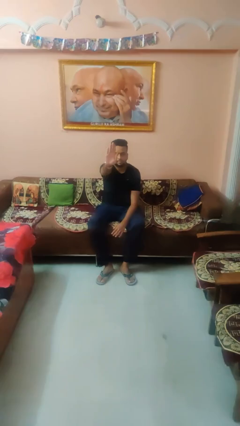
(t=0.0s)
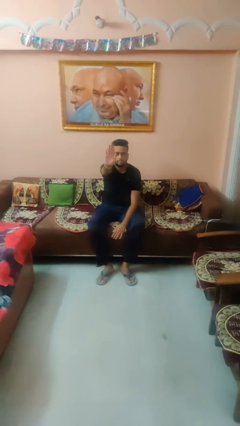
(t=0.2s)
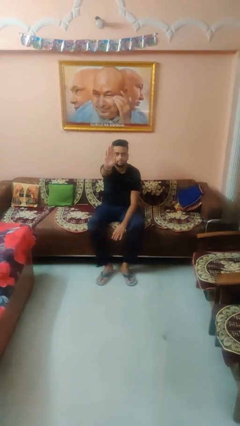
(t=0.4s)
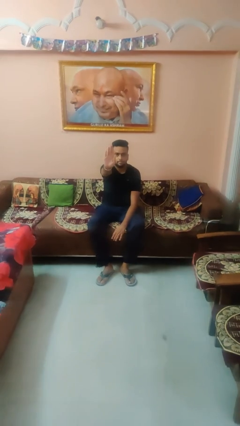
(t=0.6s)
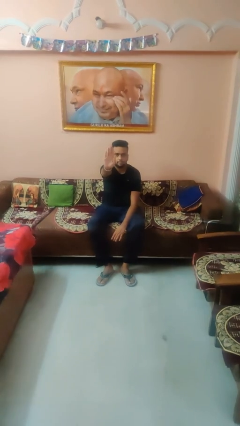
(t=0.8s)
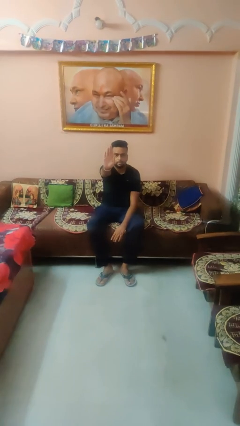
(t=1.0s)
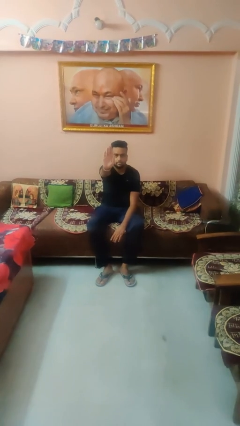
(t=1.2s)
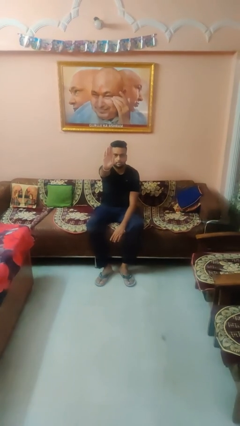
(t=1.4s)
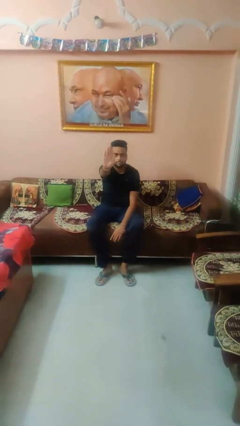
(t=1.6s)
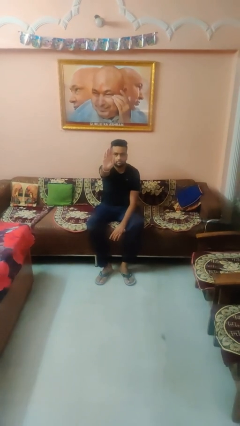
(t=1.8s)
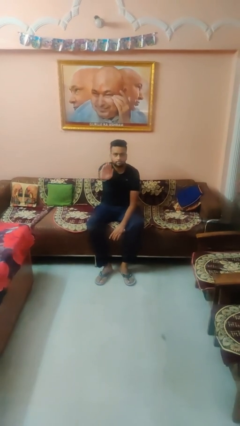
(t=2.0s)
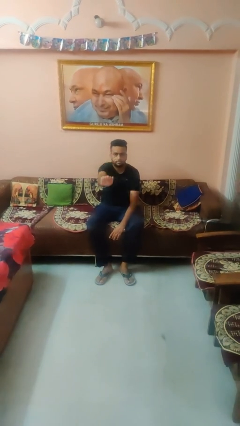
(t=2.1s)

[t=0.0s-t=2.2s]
person gestures stop

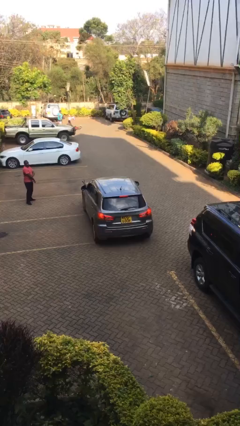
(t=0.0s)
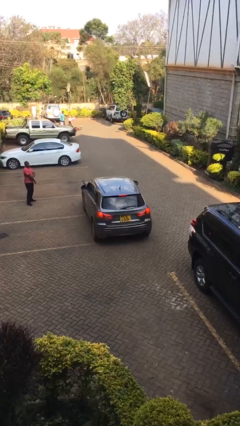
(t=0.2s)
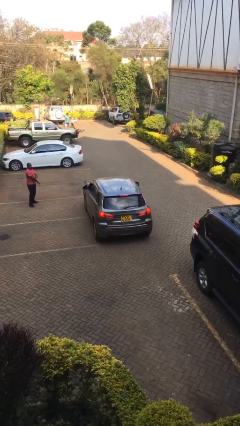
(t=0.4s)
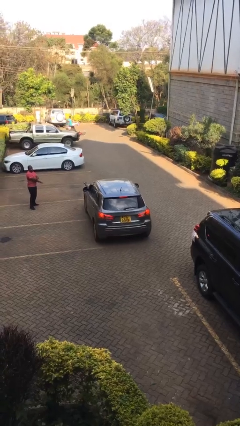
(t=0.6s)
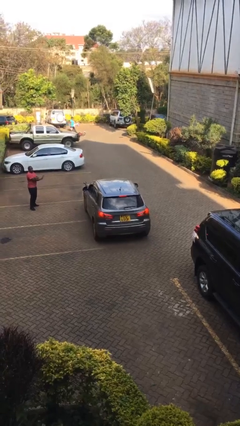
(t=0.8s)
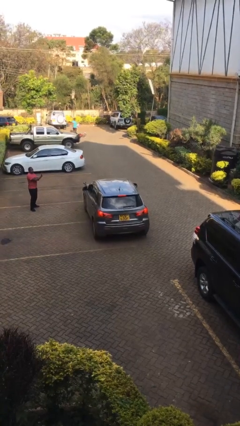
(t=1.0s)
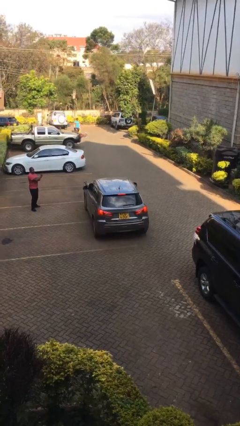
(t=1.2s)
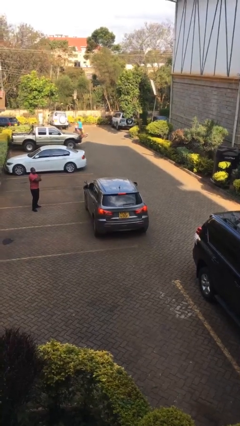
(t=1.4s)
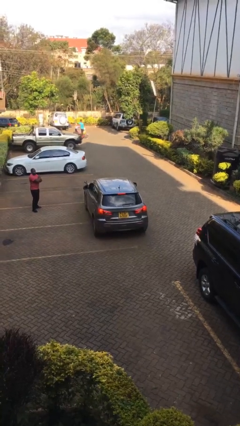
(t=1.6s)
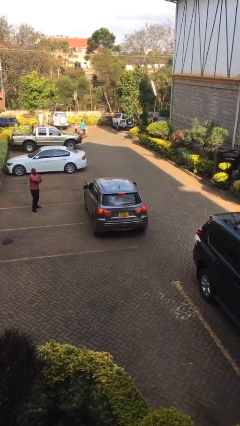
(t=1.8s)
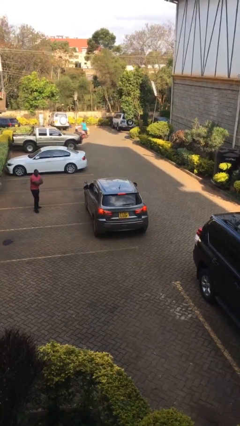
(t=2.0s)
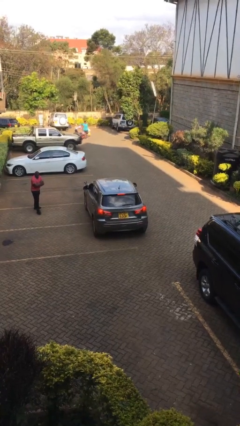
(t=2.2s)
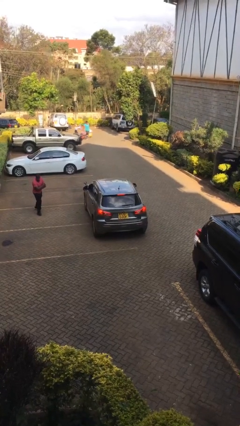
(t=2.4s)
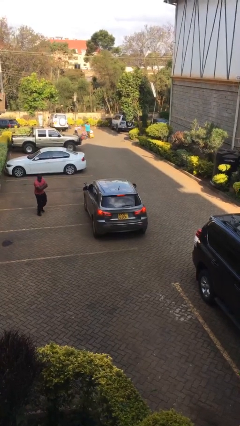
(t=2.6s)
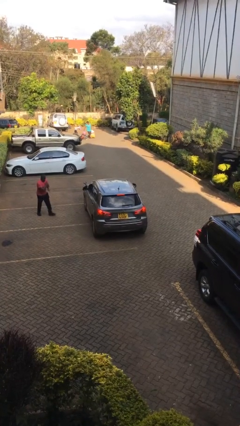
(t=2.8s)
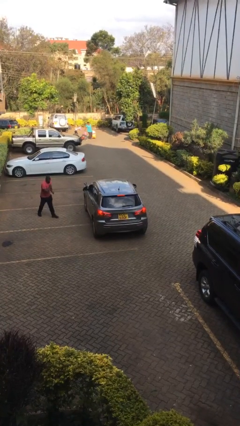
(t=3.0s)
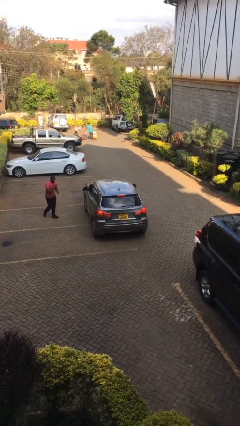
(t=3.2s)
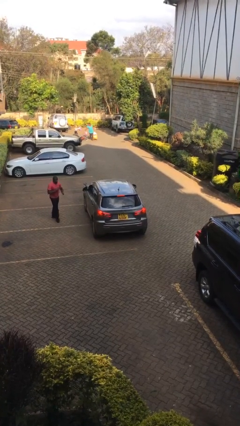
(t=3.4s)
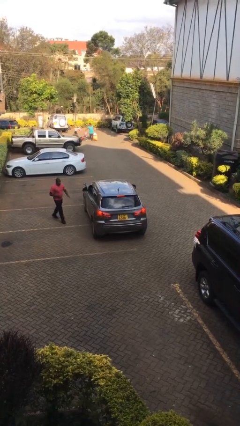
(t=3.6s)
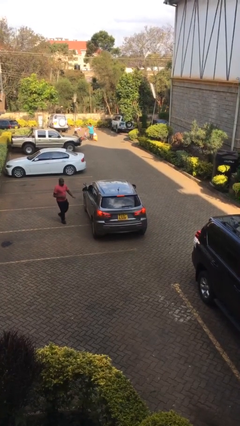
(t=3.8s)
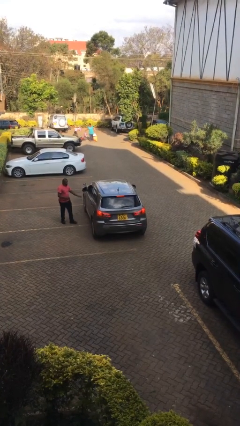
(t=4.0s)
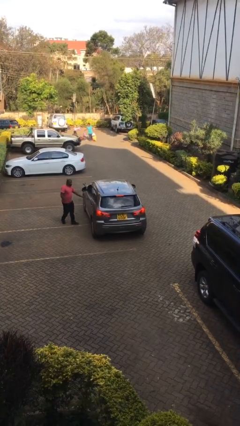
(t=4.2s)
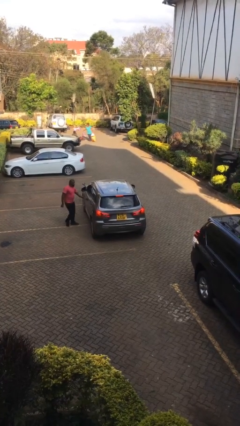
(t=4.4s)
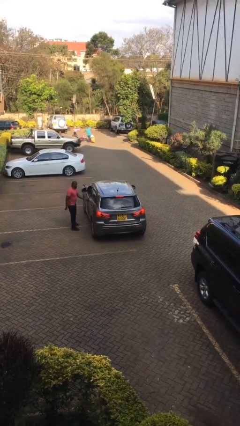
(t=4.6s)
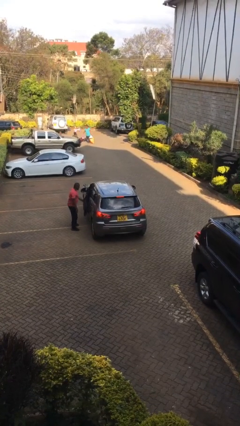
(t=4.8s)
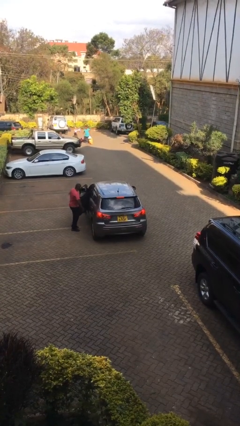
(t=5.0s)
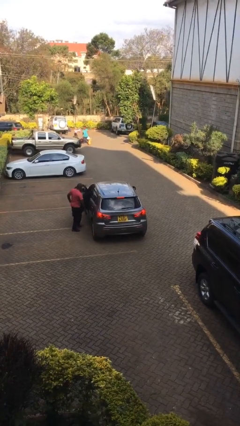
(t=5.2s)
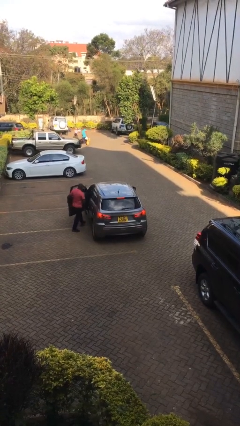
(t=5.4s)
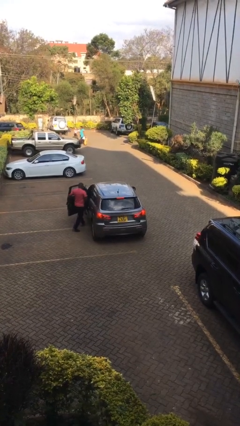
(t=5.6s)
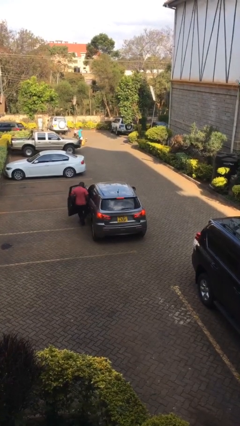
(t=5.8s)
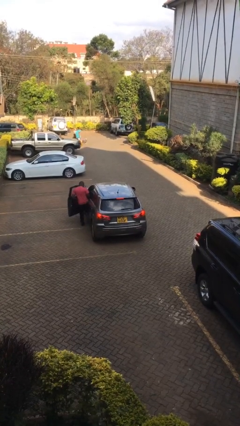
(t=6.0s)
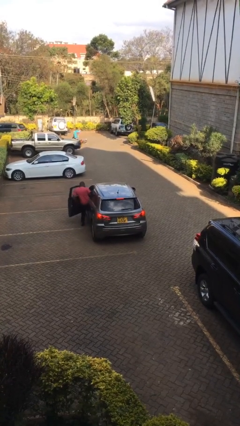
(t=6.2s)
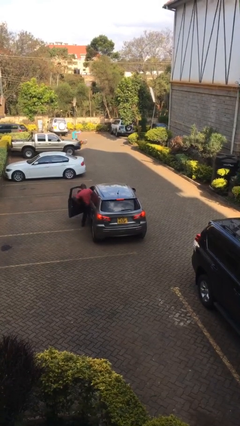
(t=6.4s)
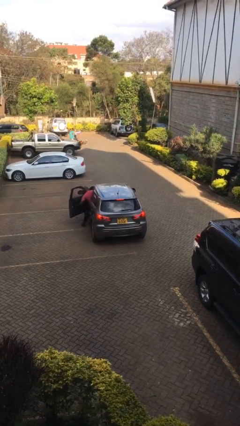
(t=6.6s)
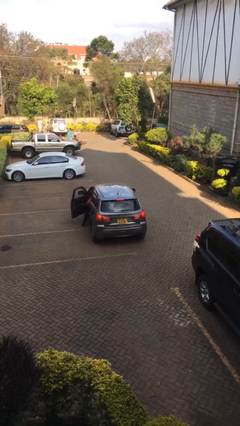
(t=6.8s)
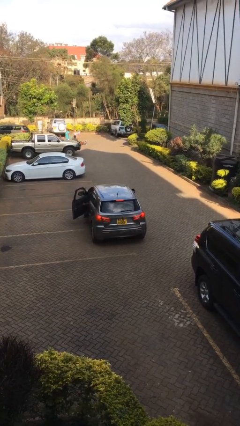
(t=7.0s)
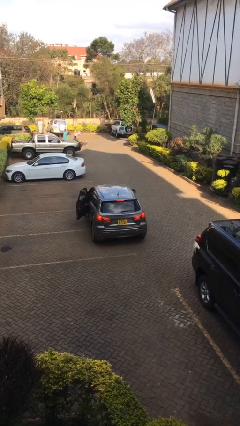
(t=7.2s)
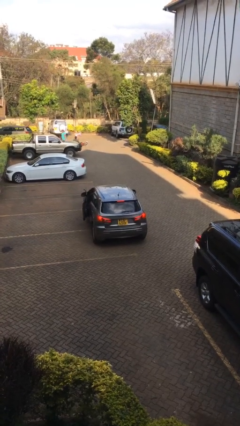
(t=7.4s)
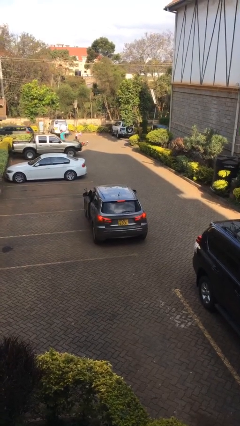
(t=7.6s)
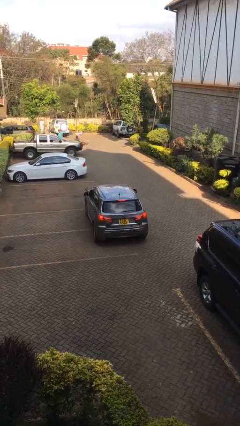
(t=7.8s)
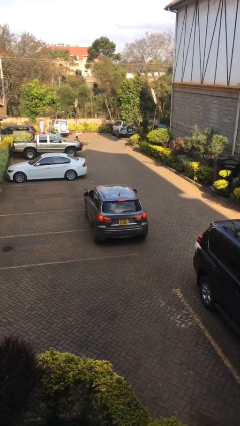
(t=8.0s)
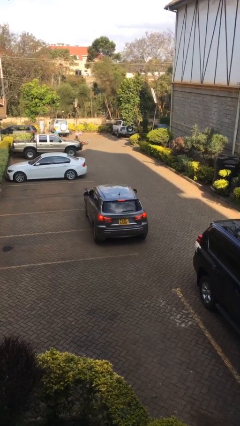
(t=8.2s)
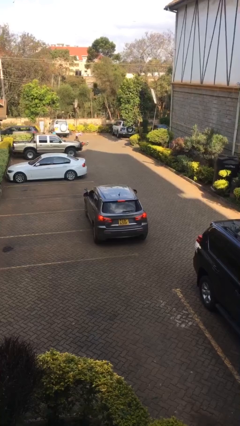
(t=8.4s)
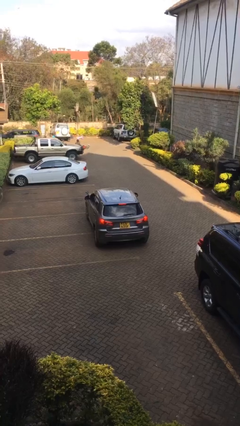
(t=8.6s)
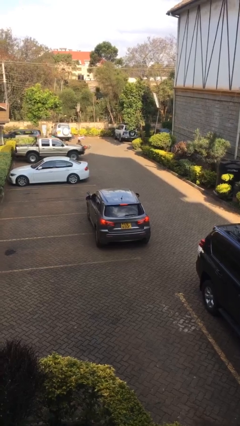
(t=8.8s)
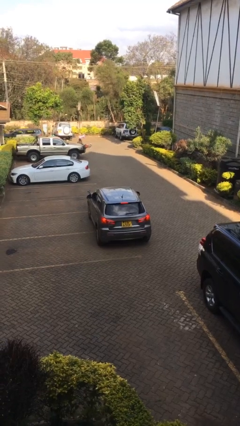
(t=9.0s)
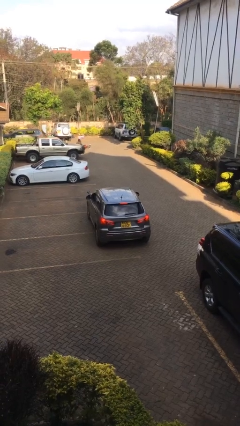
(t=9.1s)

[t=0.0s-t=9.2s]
car picks up person

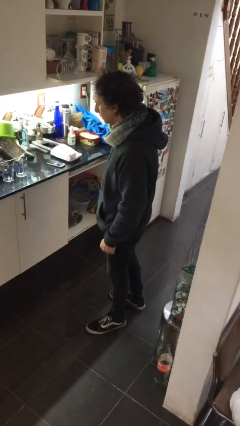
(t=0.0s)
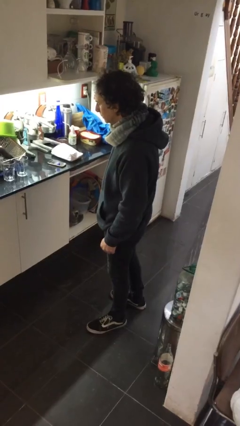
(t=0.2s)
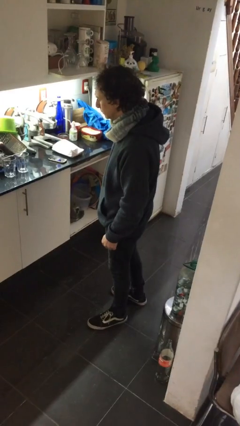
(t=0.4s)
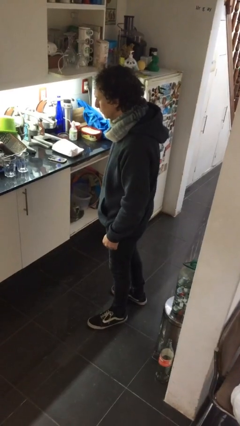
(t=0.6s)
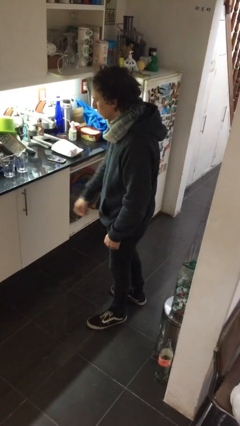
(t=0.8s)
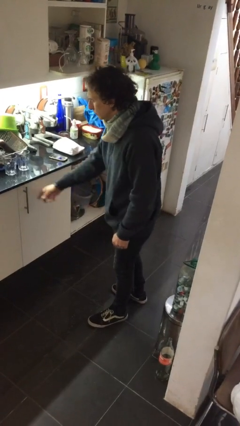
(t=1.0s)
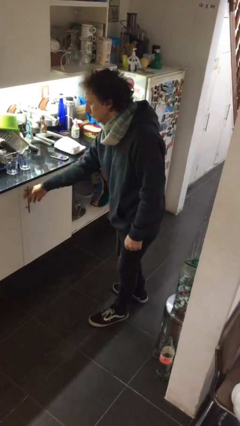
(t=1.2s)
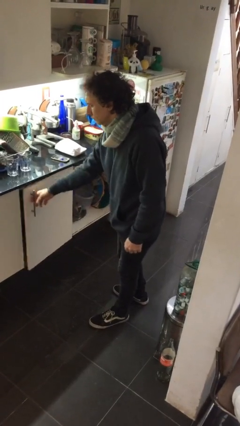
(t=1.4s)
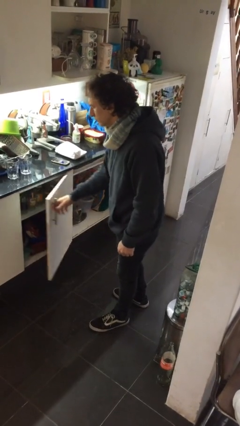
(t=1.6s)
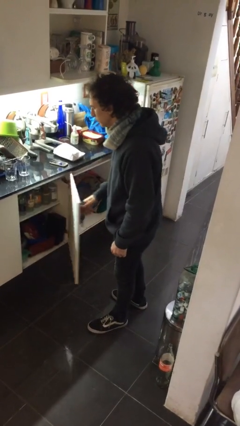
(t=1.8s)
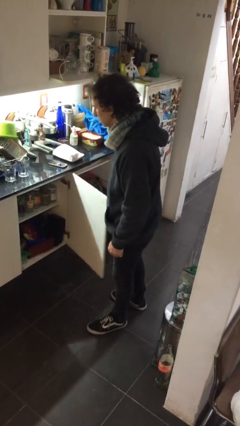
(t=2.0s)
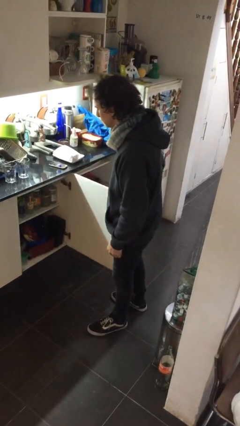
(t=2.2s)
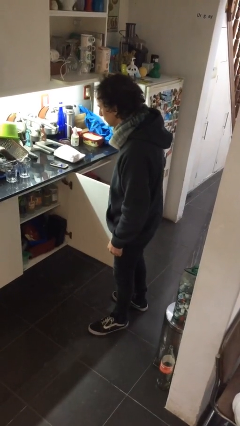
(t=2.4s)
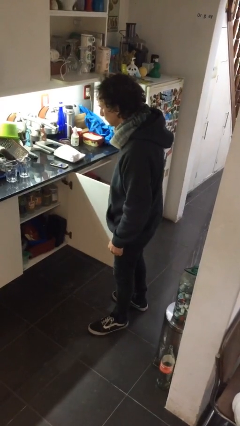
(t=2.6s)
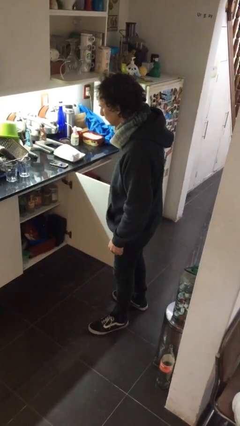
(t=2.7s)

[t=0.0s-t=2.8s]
person closes cabinet

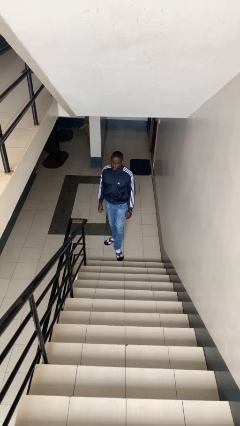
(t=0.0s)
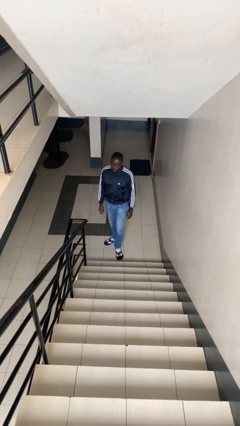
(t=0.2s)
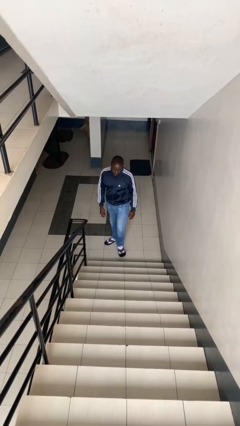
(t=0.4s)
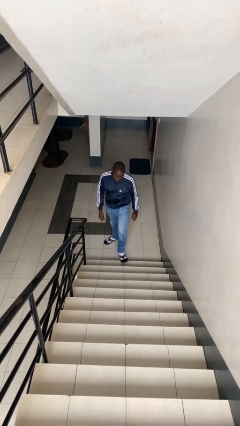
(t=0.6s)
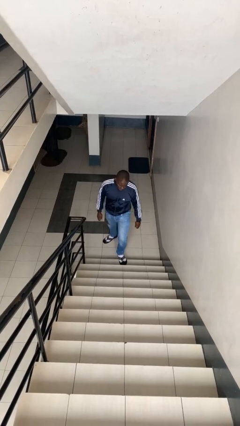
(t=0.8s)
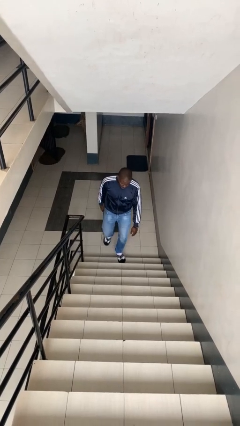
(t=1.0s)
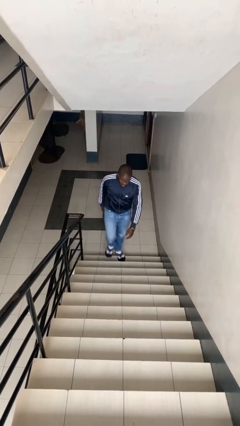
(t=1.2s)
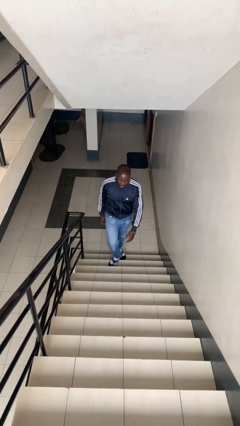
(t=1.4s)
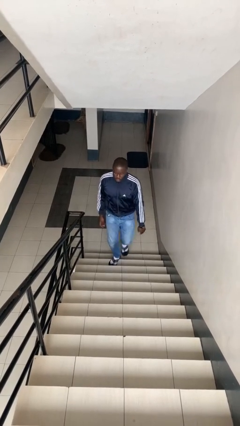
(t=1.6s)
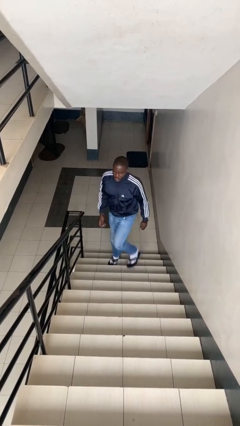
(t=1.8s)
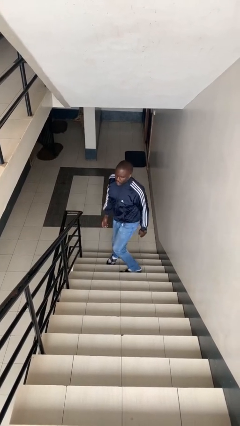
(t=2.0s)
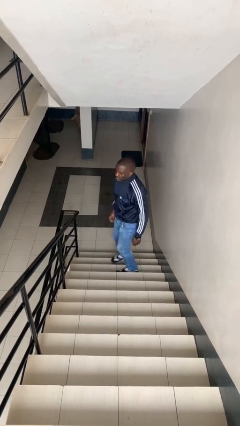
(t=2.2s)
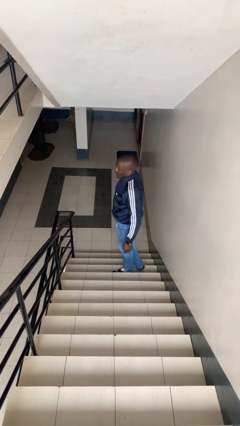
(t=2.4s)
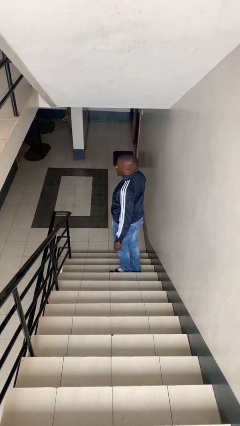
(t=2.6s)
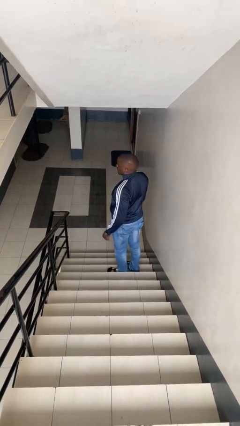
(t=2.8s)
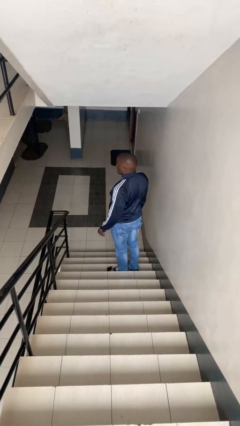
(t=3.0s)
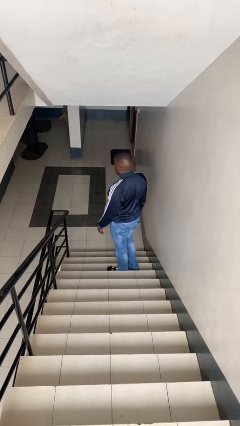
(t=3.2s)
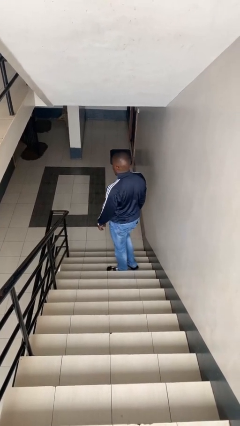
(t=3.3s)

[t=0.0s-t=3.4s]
person climbs up stairs
